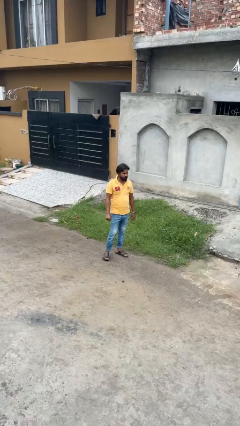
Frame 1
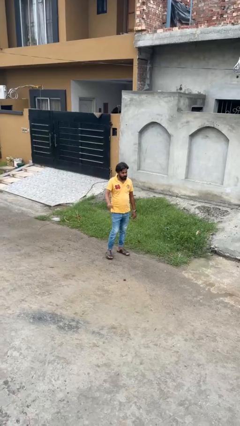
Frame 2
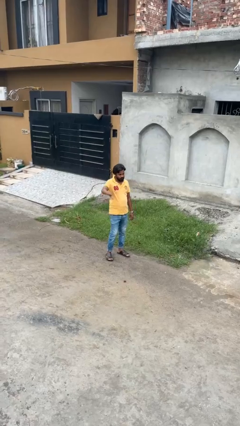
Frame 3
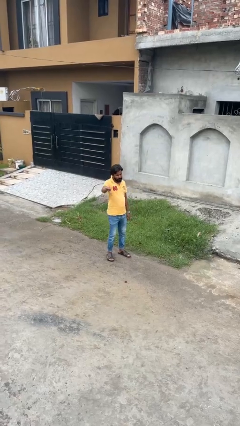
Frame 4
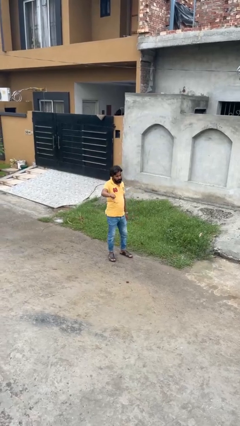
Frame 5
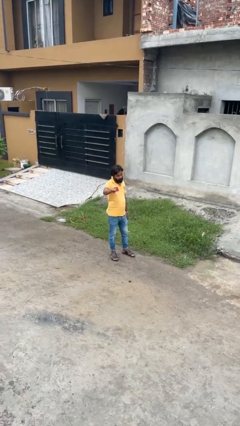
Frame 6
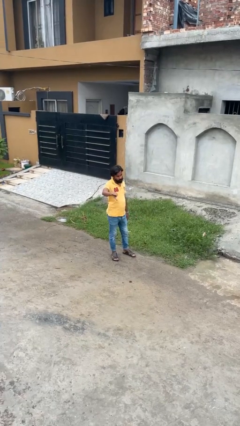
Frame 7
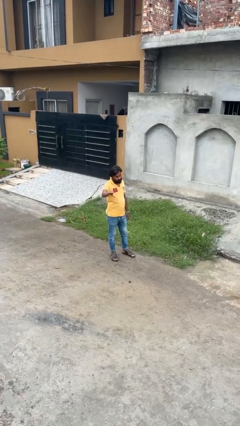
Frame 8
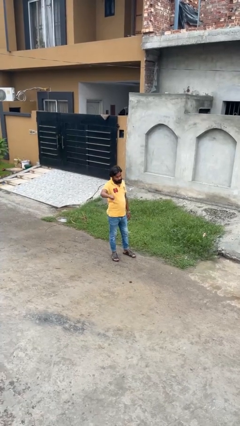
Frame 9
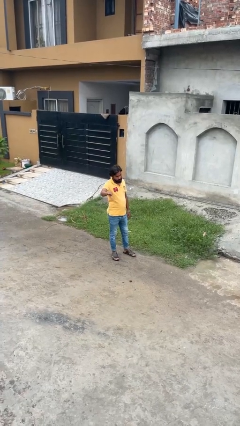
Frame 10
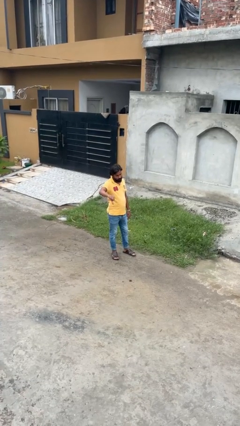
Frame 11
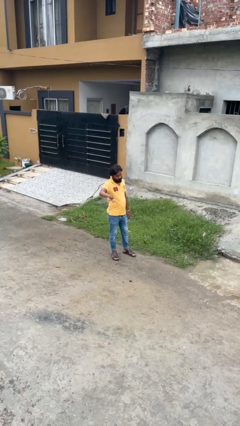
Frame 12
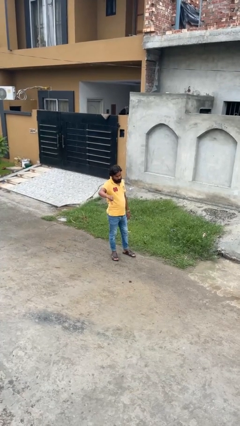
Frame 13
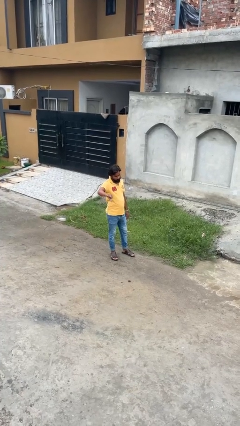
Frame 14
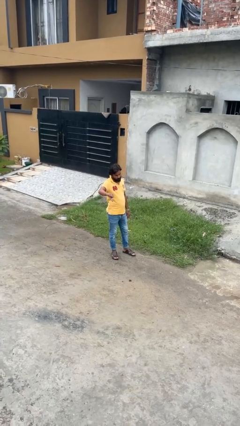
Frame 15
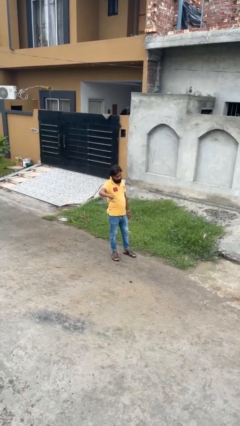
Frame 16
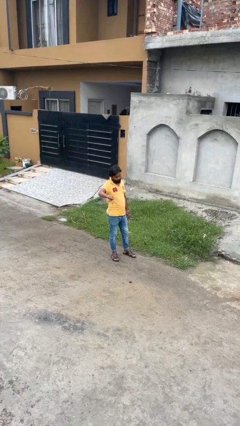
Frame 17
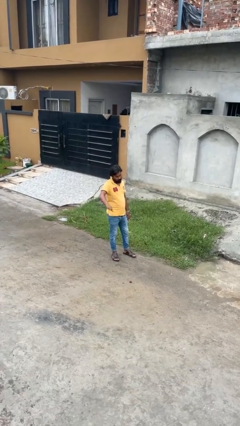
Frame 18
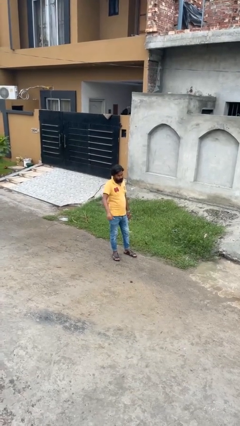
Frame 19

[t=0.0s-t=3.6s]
person gestures thumbs down

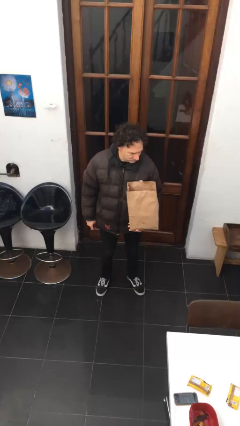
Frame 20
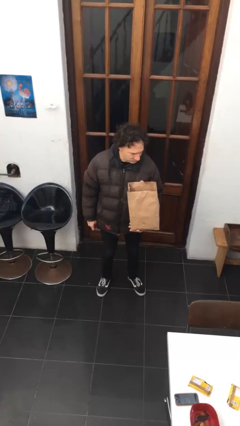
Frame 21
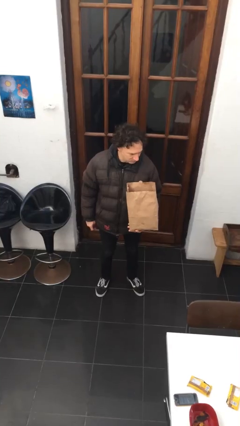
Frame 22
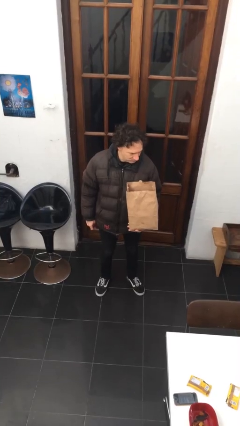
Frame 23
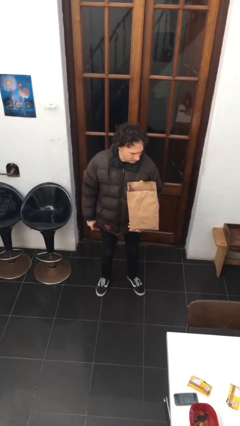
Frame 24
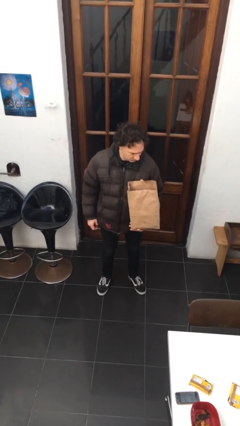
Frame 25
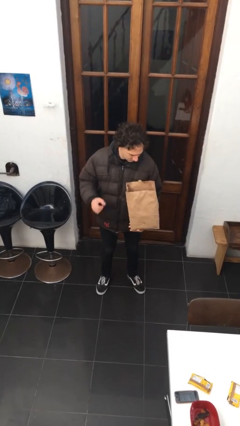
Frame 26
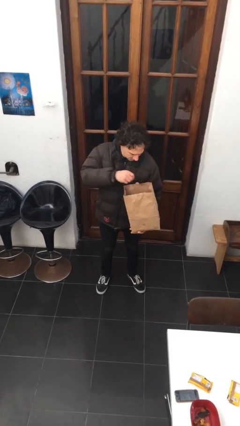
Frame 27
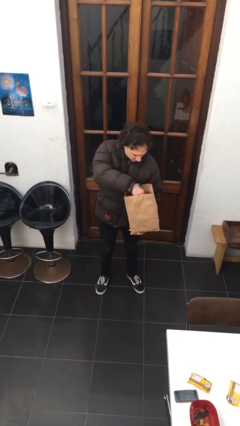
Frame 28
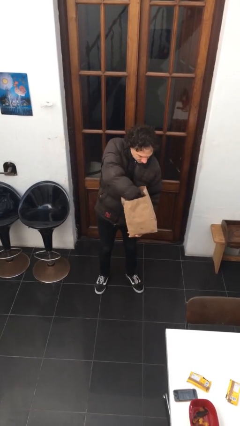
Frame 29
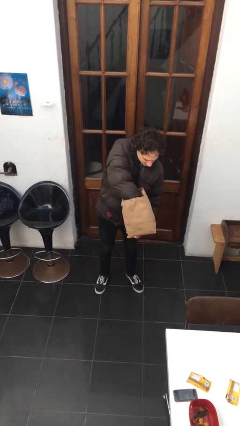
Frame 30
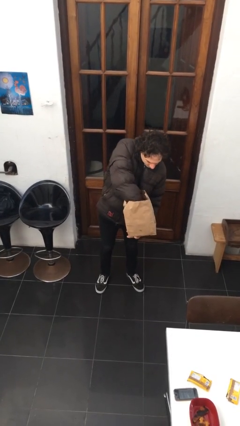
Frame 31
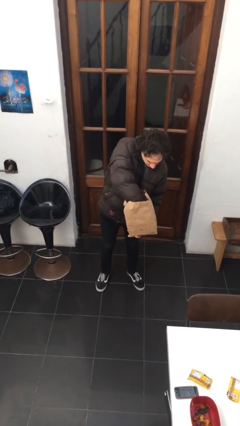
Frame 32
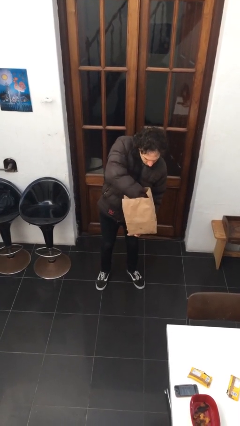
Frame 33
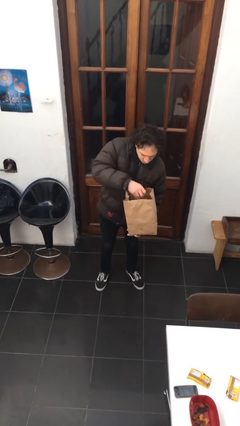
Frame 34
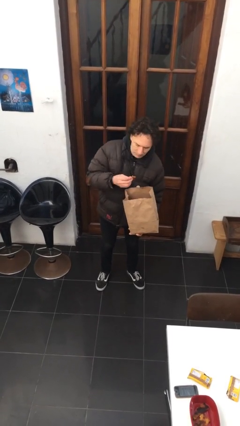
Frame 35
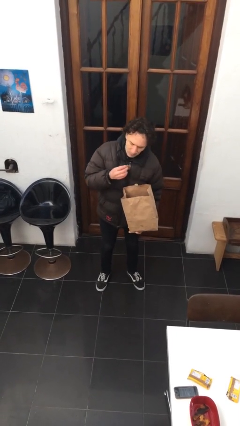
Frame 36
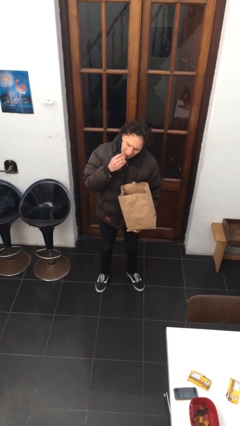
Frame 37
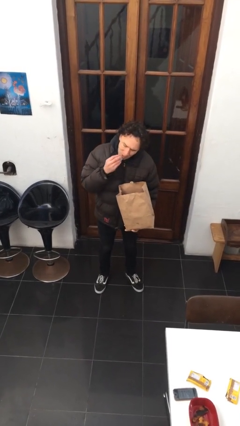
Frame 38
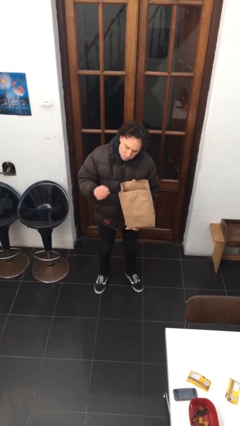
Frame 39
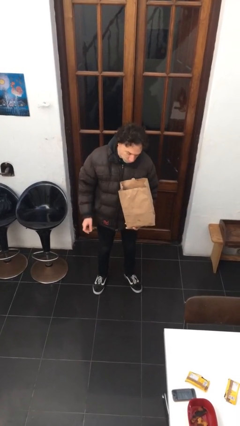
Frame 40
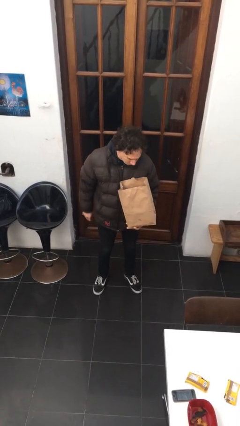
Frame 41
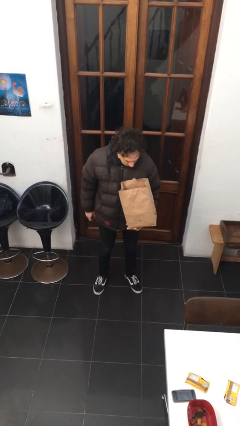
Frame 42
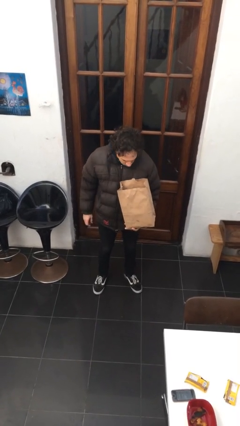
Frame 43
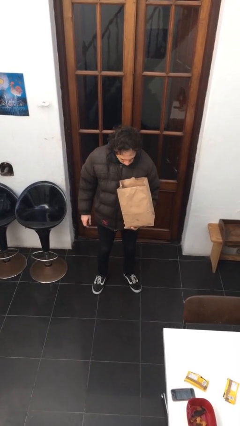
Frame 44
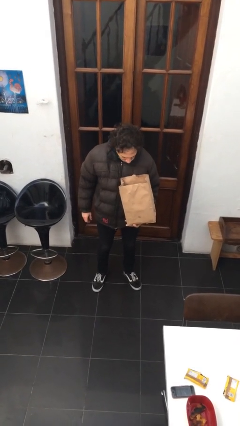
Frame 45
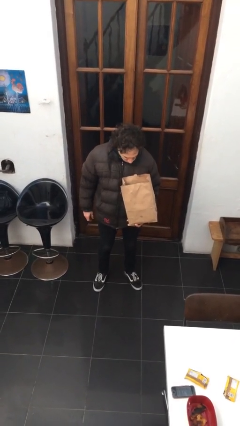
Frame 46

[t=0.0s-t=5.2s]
person eats snack from bag

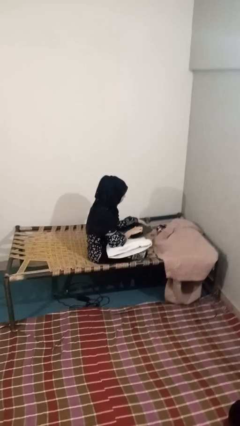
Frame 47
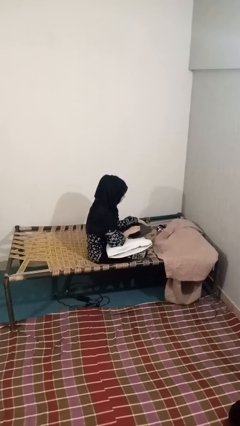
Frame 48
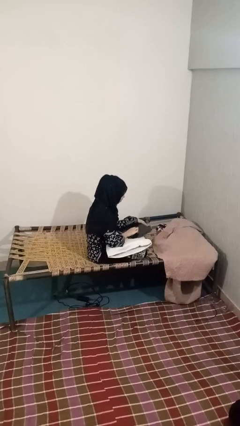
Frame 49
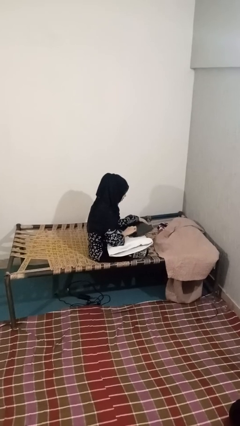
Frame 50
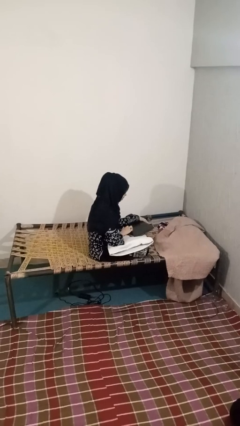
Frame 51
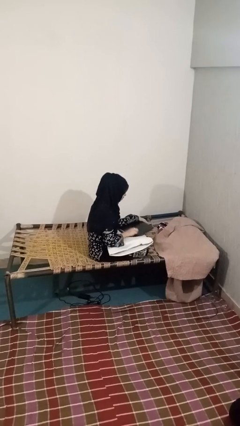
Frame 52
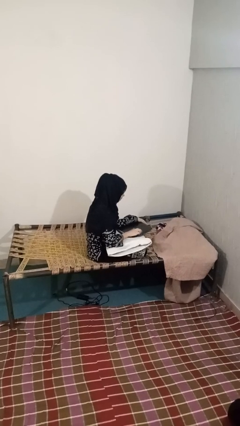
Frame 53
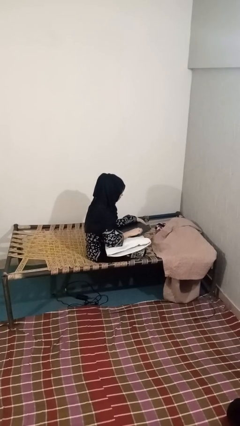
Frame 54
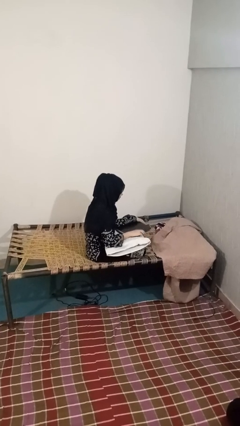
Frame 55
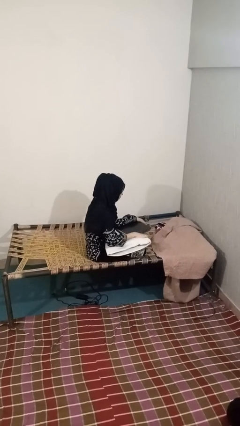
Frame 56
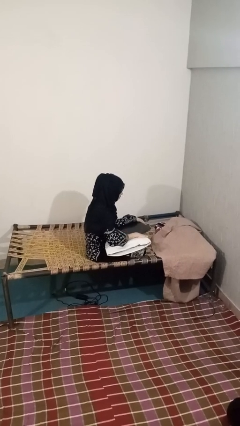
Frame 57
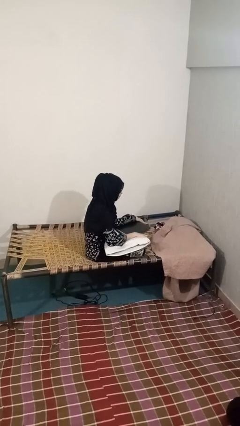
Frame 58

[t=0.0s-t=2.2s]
person interacts with tablet

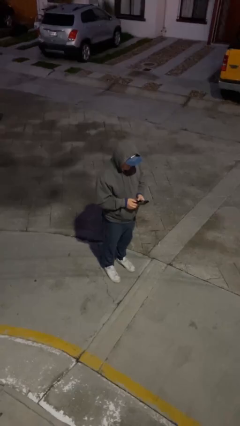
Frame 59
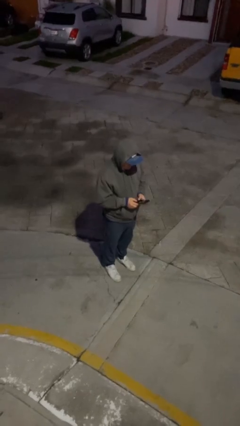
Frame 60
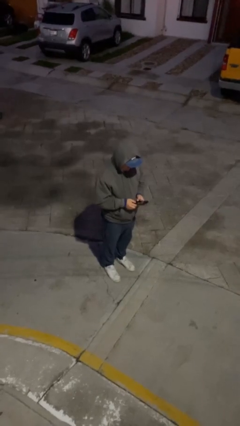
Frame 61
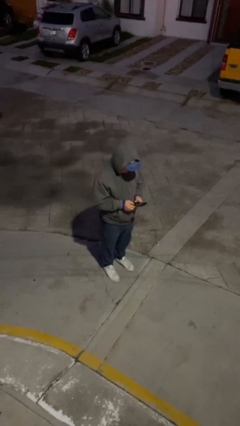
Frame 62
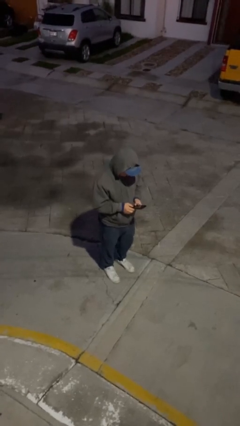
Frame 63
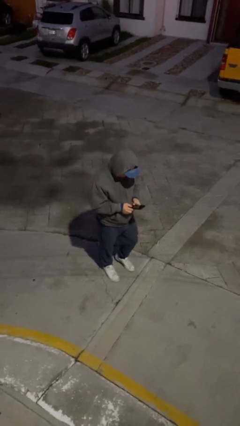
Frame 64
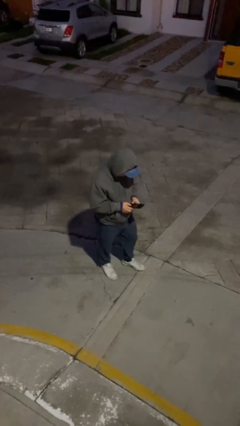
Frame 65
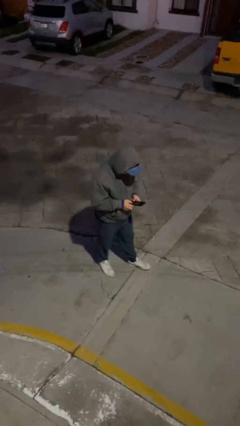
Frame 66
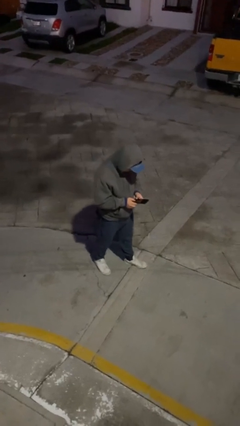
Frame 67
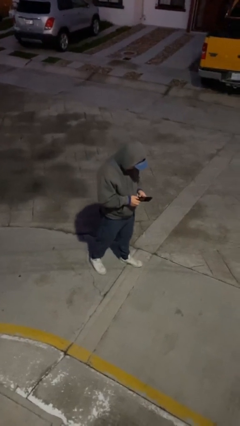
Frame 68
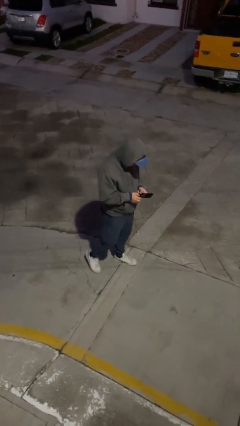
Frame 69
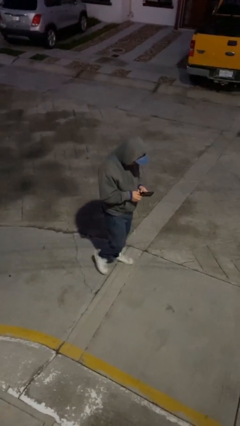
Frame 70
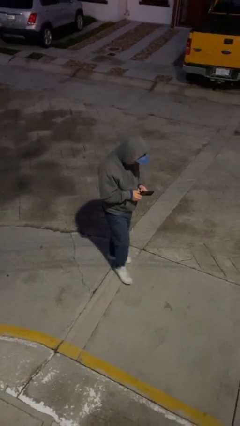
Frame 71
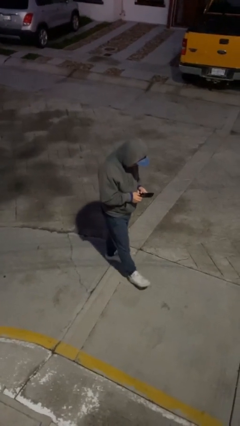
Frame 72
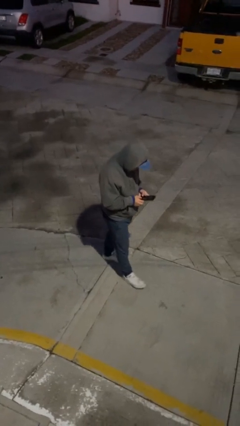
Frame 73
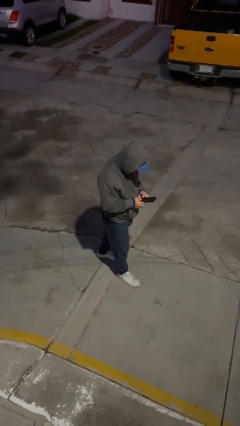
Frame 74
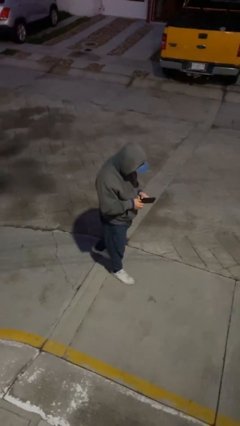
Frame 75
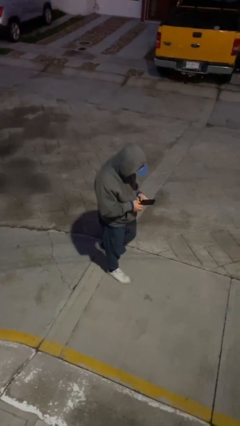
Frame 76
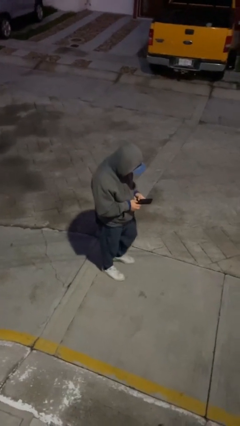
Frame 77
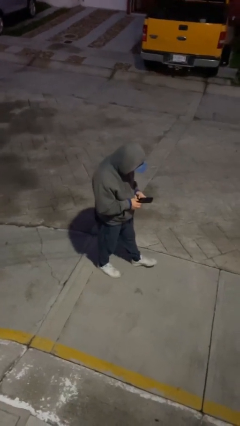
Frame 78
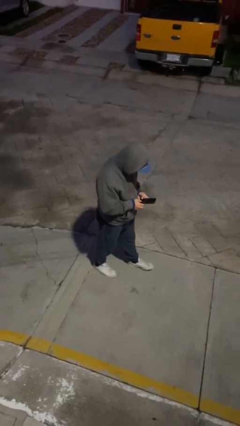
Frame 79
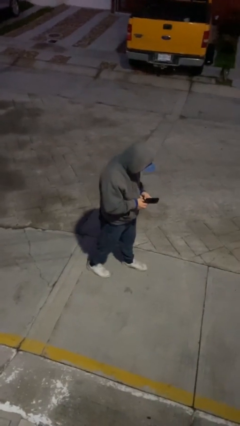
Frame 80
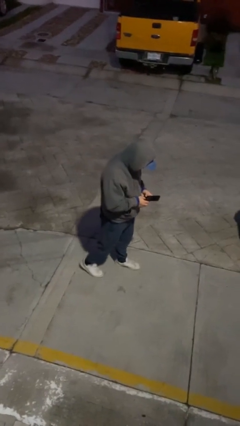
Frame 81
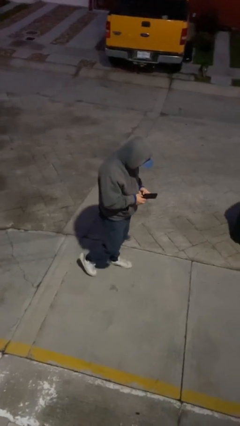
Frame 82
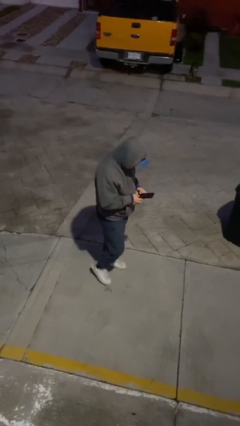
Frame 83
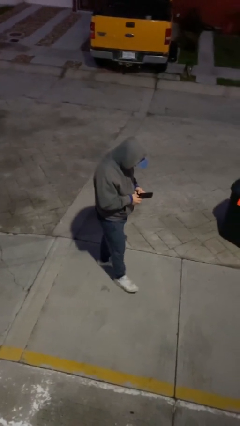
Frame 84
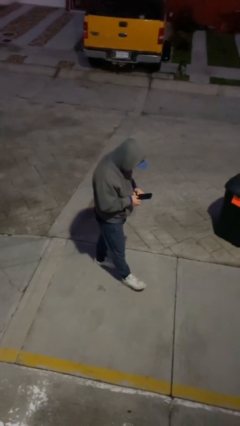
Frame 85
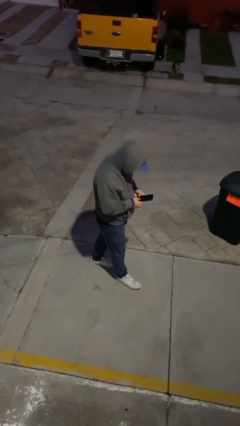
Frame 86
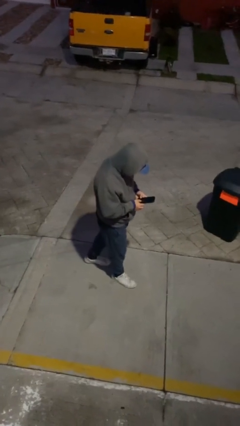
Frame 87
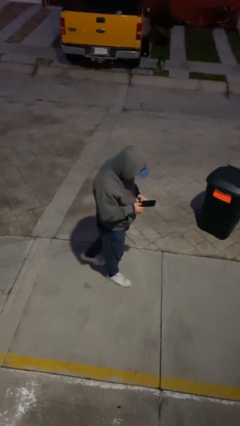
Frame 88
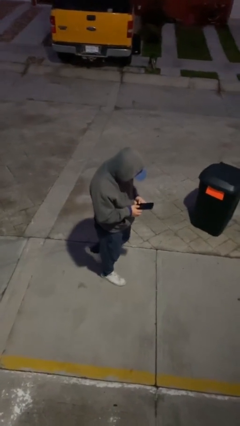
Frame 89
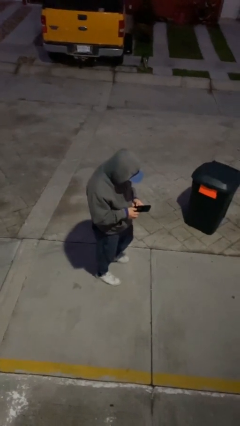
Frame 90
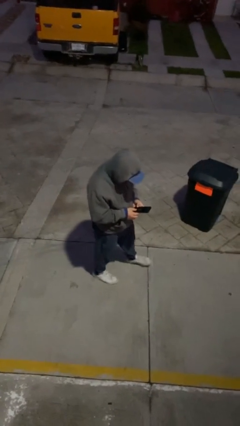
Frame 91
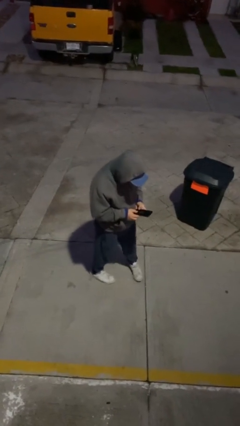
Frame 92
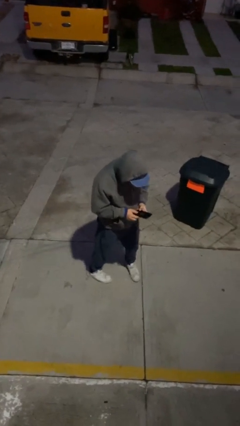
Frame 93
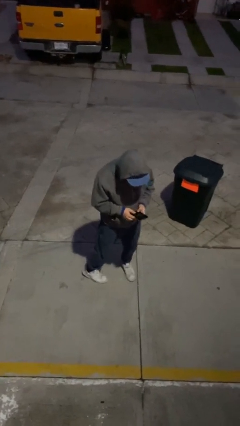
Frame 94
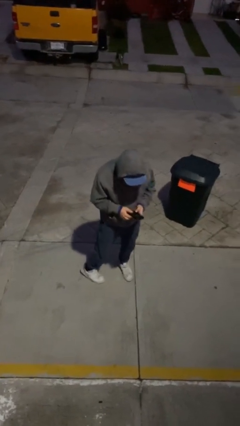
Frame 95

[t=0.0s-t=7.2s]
person texts on phone
